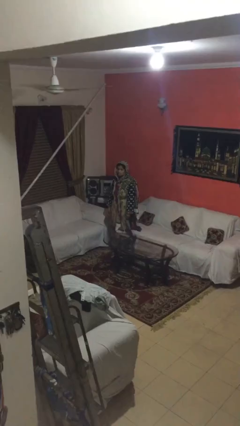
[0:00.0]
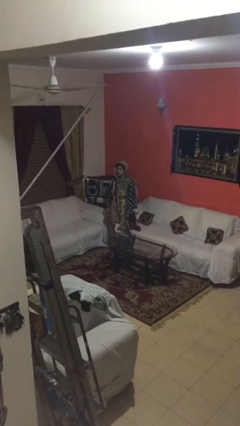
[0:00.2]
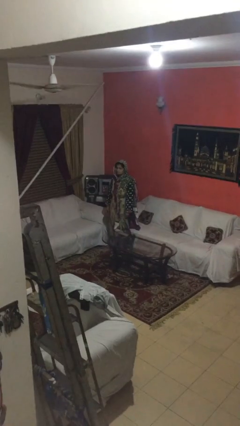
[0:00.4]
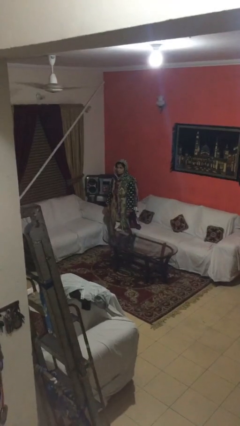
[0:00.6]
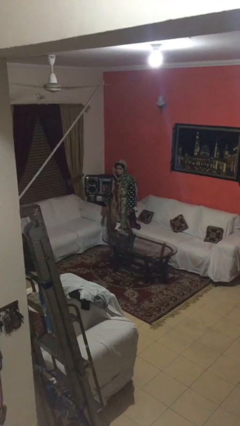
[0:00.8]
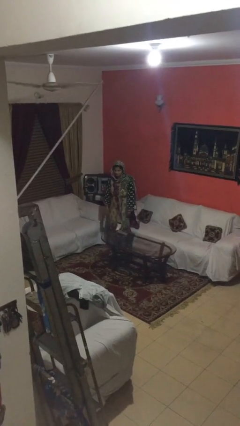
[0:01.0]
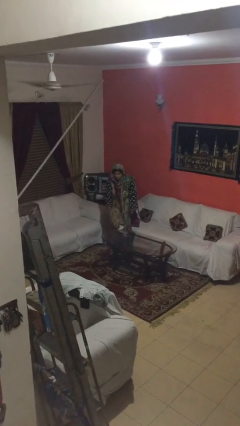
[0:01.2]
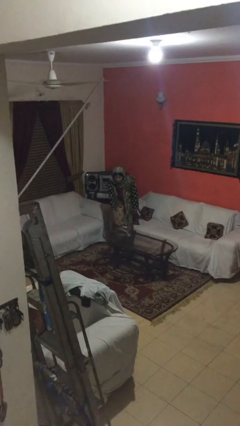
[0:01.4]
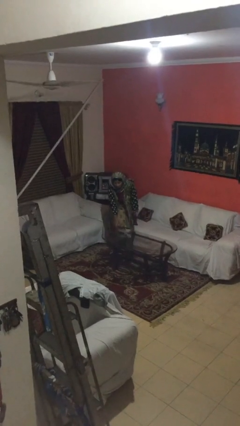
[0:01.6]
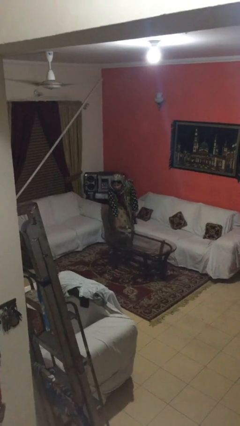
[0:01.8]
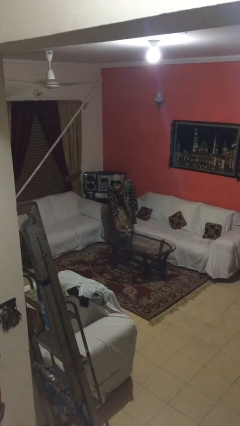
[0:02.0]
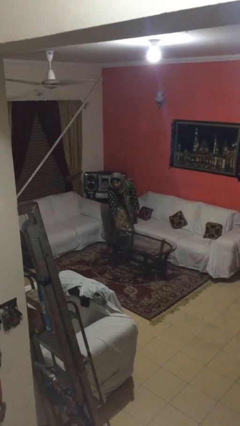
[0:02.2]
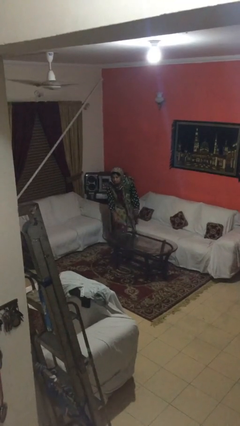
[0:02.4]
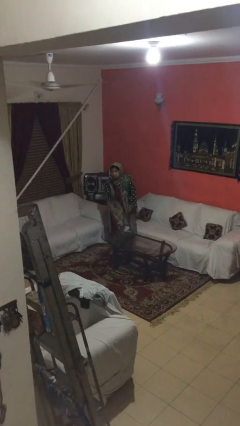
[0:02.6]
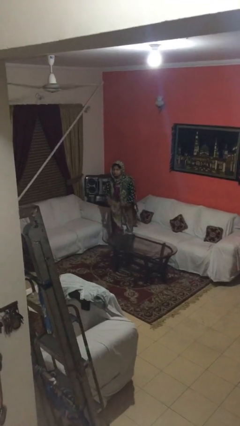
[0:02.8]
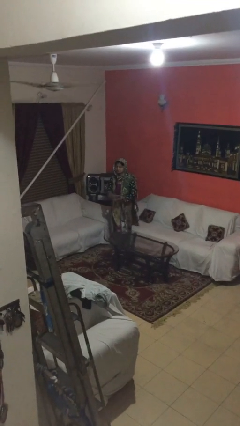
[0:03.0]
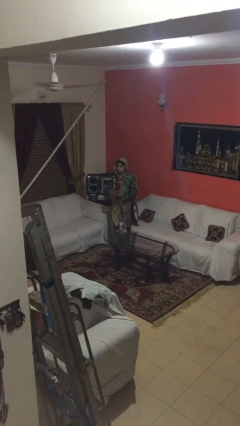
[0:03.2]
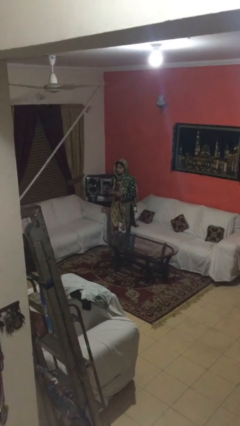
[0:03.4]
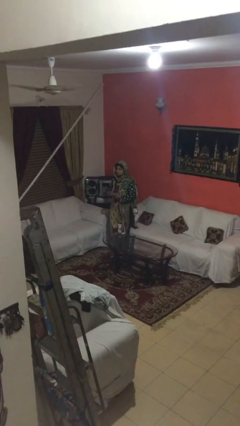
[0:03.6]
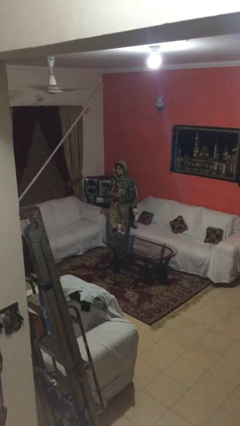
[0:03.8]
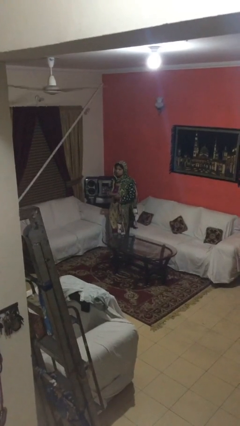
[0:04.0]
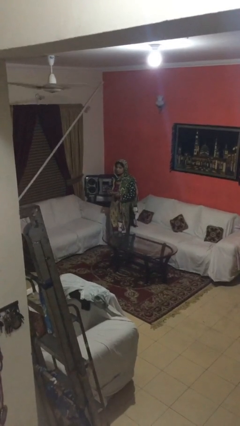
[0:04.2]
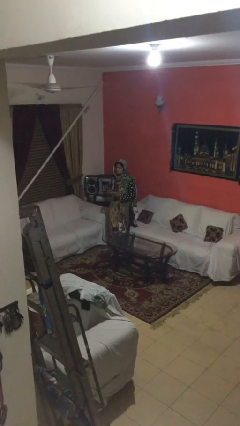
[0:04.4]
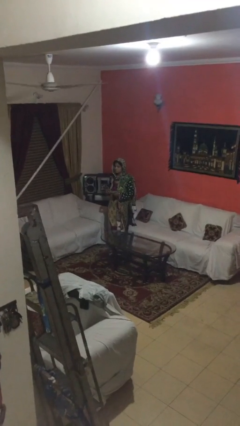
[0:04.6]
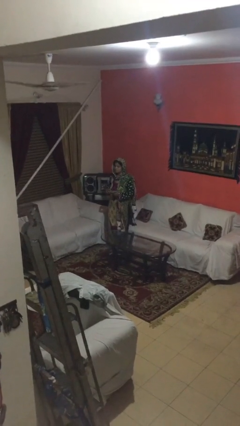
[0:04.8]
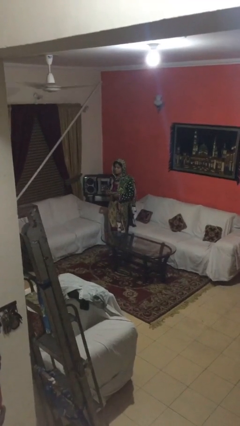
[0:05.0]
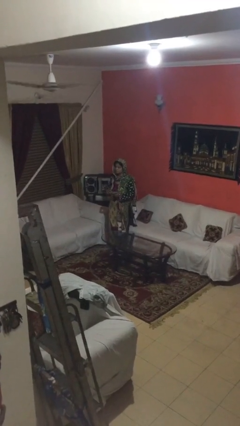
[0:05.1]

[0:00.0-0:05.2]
person picks up object from table

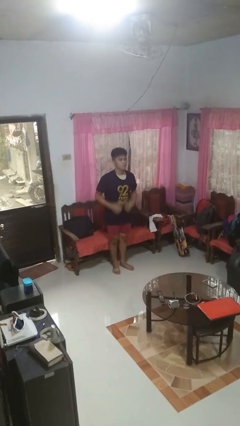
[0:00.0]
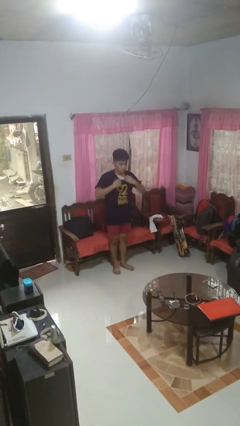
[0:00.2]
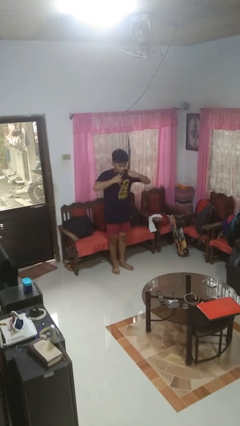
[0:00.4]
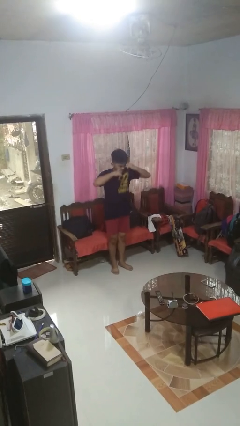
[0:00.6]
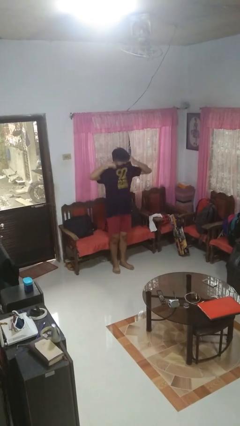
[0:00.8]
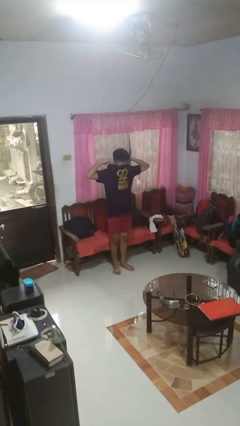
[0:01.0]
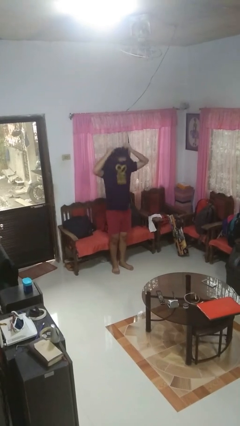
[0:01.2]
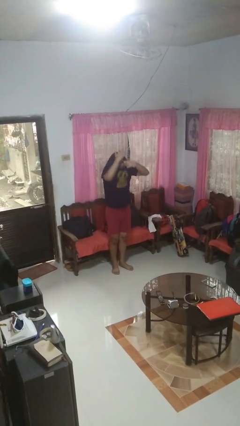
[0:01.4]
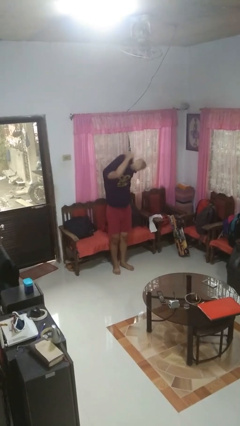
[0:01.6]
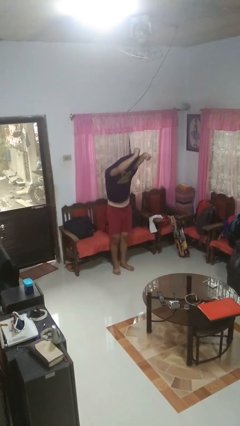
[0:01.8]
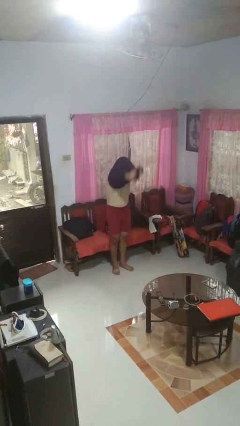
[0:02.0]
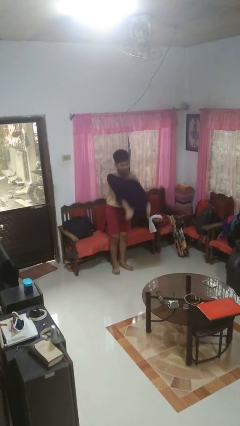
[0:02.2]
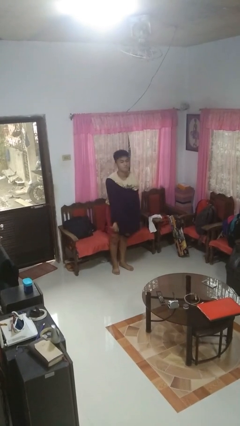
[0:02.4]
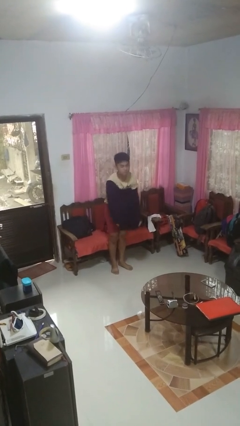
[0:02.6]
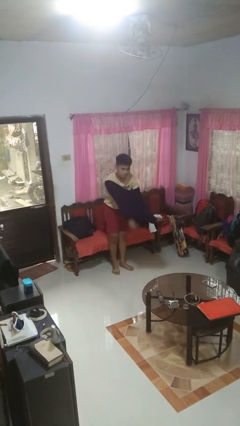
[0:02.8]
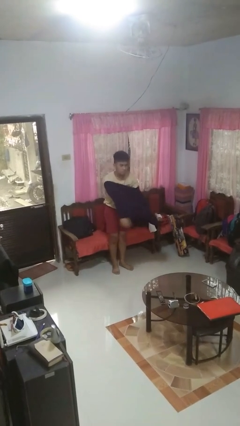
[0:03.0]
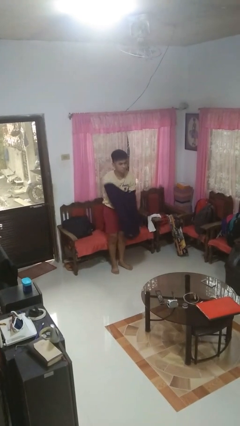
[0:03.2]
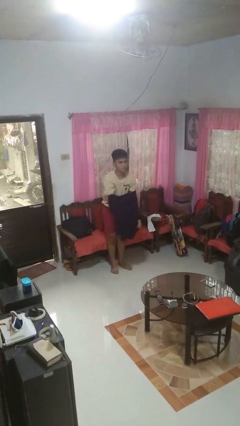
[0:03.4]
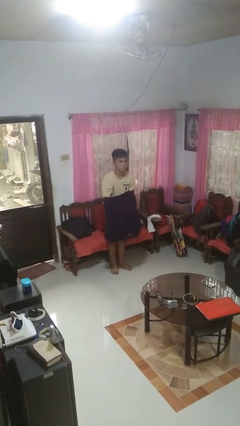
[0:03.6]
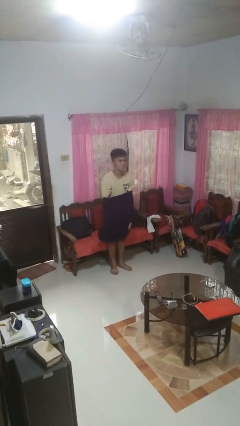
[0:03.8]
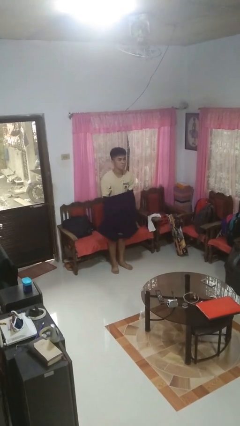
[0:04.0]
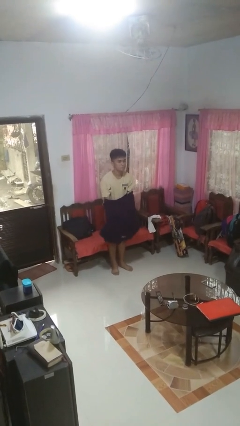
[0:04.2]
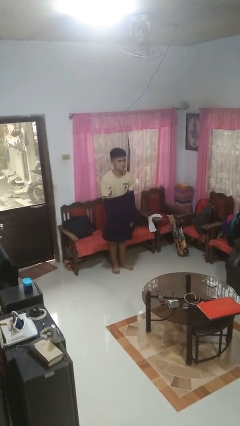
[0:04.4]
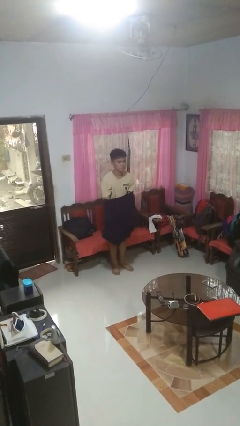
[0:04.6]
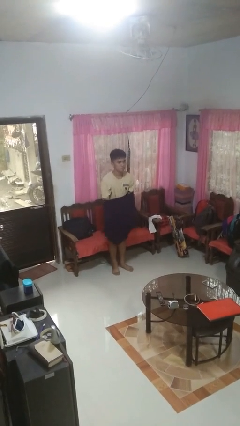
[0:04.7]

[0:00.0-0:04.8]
person takes off shirt

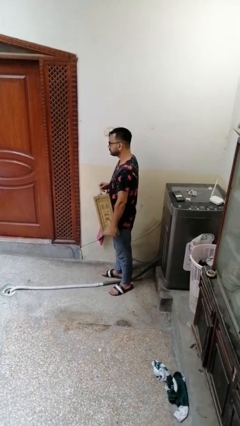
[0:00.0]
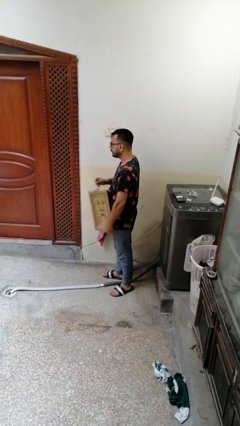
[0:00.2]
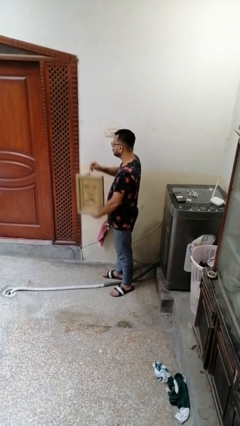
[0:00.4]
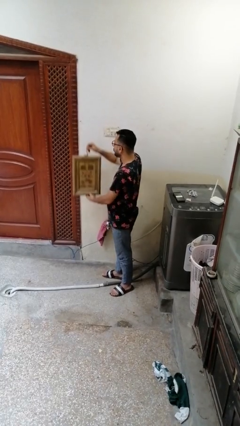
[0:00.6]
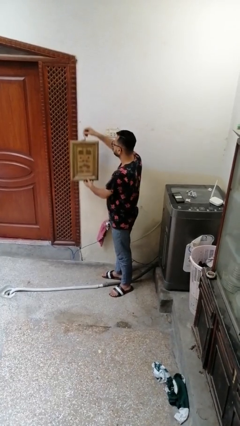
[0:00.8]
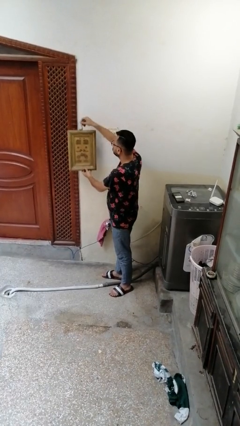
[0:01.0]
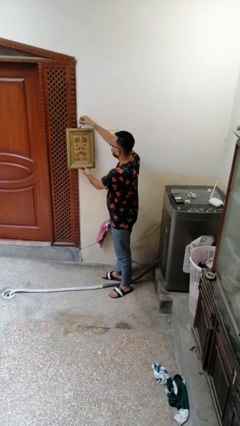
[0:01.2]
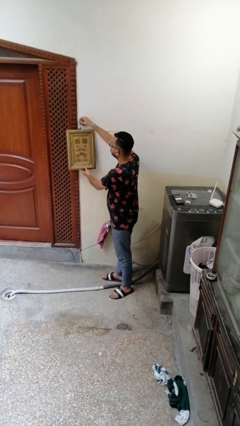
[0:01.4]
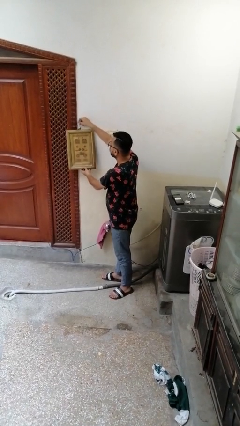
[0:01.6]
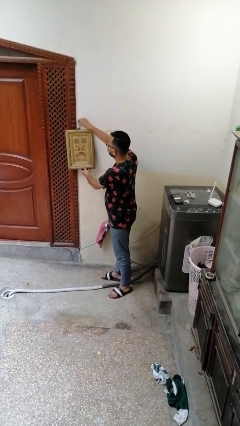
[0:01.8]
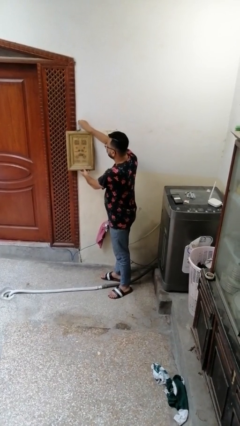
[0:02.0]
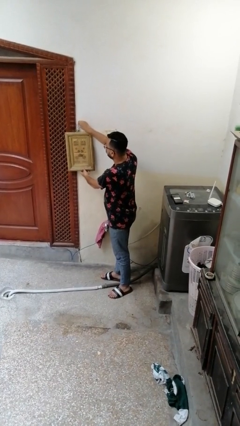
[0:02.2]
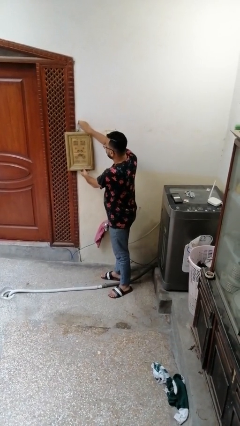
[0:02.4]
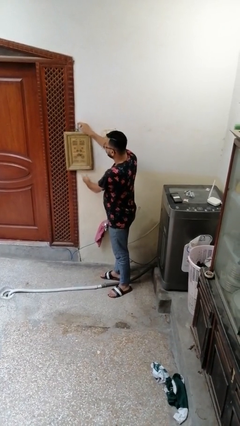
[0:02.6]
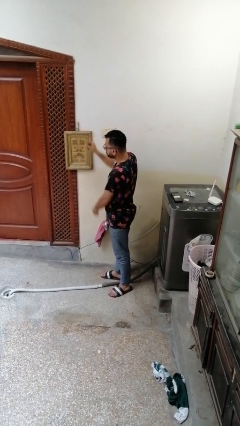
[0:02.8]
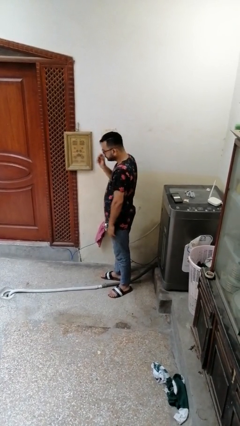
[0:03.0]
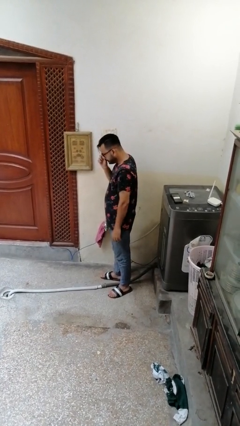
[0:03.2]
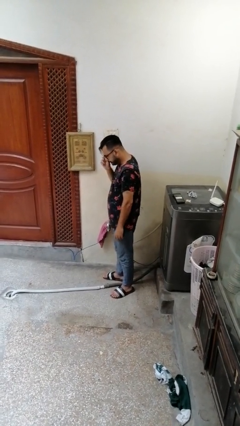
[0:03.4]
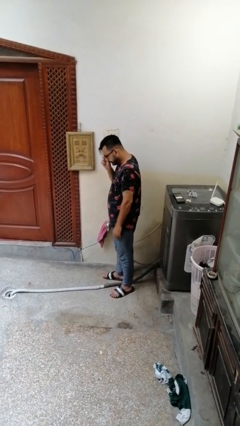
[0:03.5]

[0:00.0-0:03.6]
person puts up picture frame

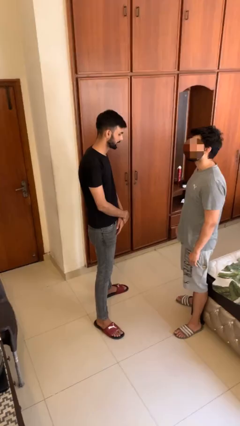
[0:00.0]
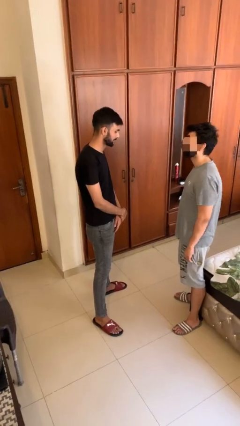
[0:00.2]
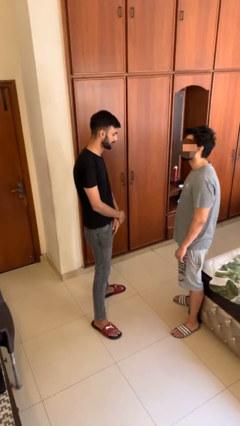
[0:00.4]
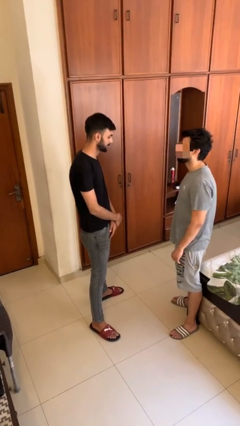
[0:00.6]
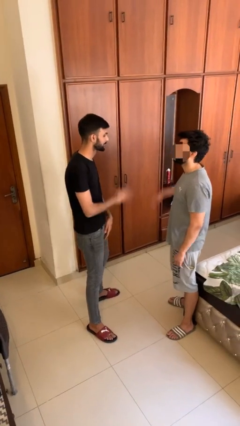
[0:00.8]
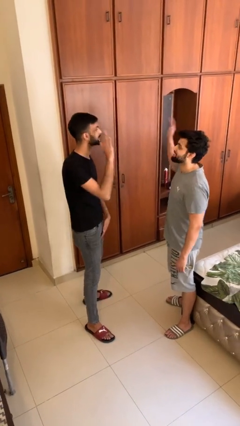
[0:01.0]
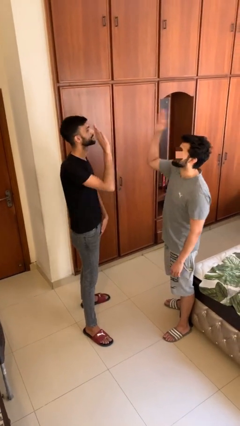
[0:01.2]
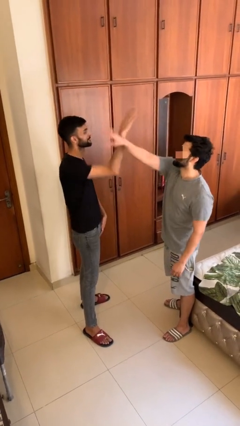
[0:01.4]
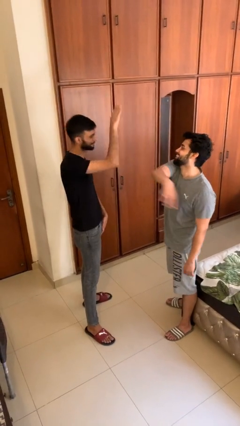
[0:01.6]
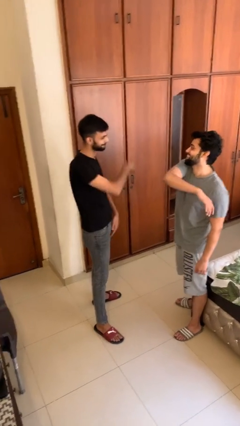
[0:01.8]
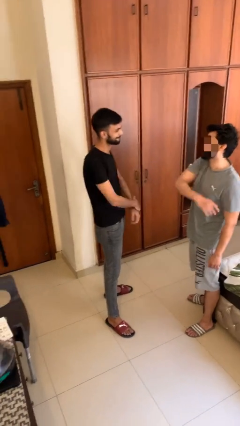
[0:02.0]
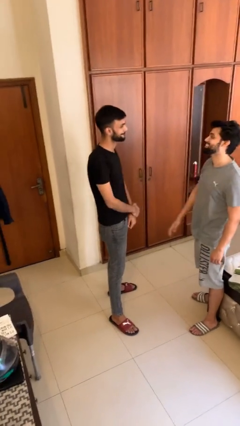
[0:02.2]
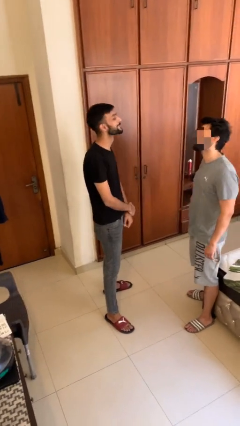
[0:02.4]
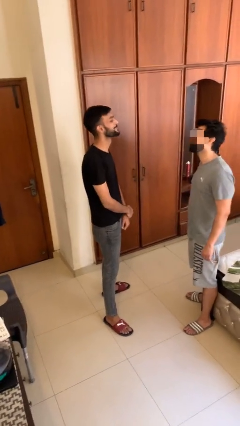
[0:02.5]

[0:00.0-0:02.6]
person highfives hand

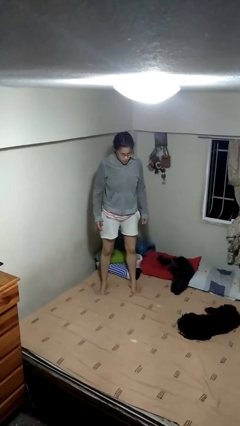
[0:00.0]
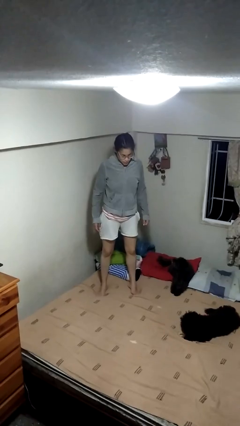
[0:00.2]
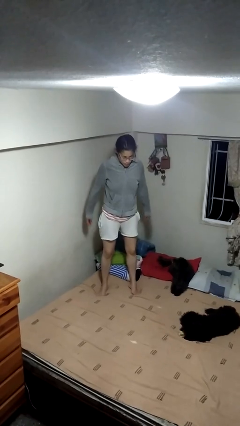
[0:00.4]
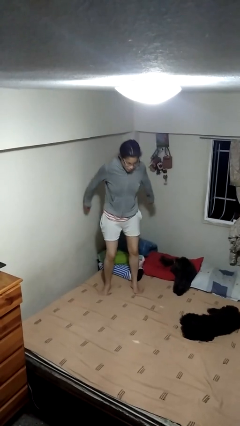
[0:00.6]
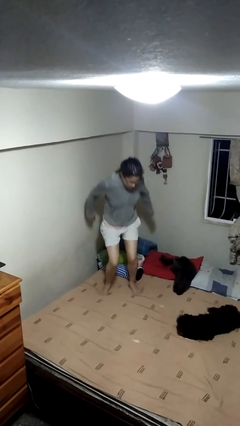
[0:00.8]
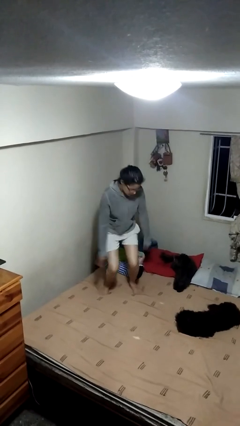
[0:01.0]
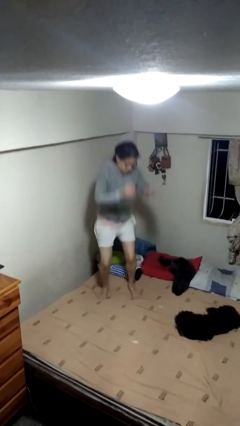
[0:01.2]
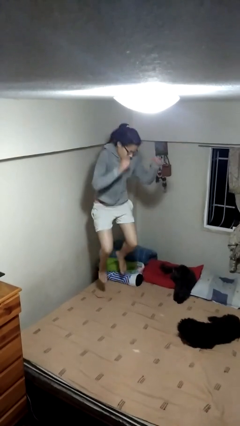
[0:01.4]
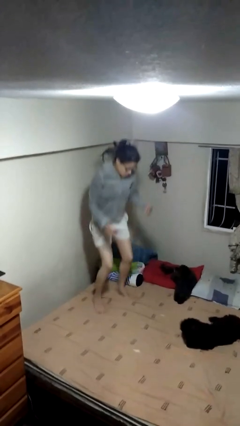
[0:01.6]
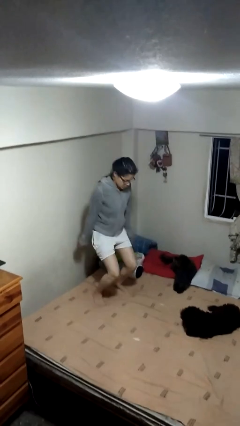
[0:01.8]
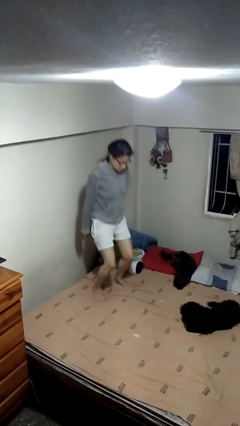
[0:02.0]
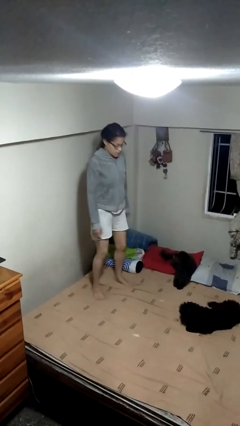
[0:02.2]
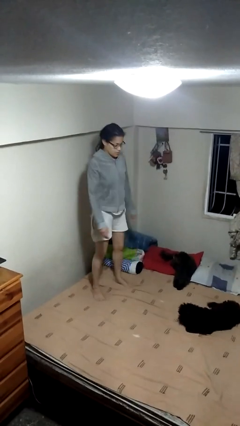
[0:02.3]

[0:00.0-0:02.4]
person jumps on bed
